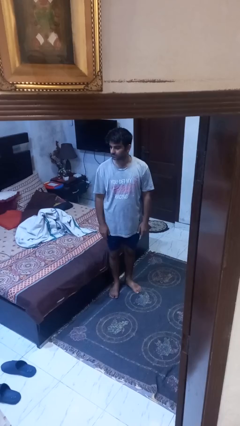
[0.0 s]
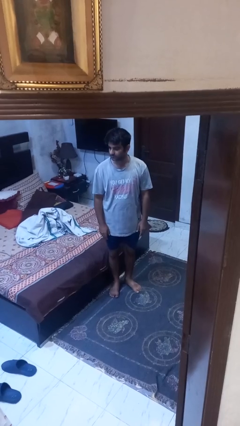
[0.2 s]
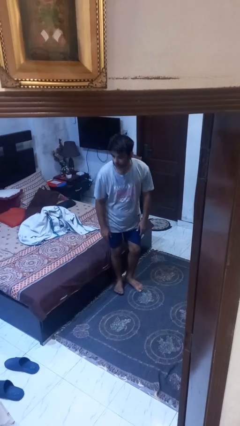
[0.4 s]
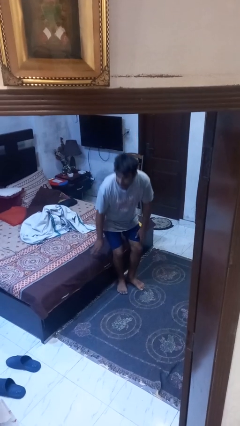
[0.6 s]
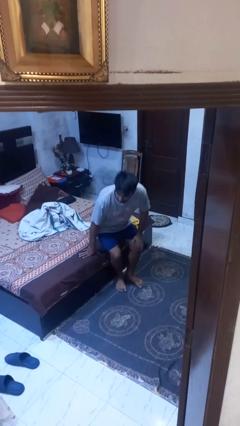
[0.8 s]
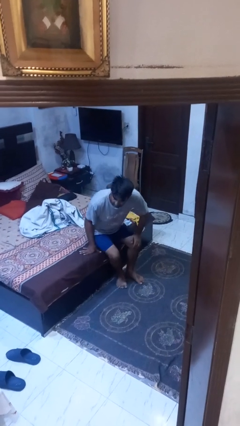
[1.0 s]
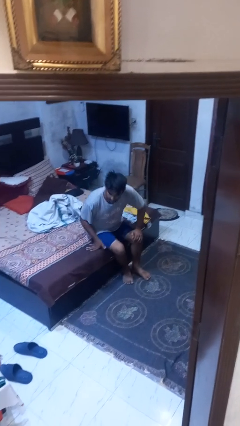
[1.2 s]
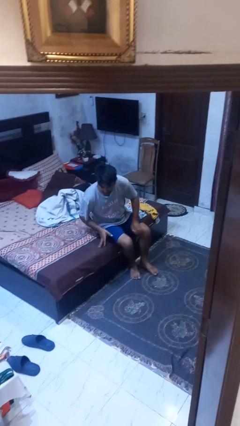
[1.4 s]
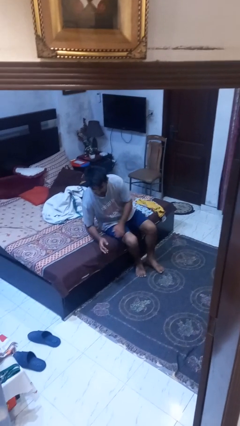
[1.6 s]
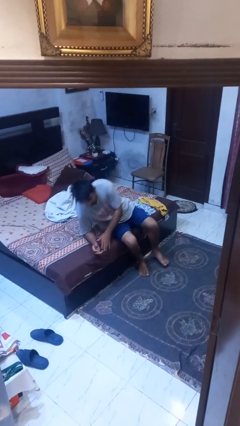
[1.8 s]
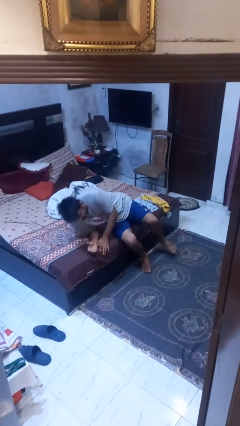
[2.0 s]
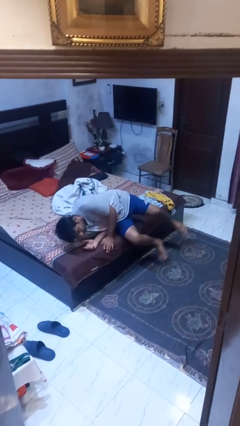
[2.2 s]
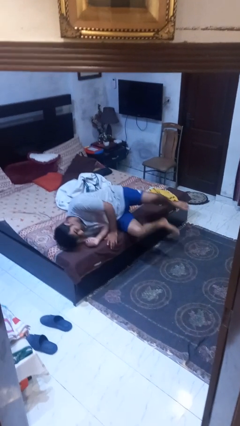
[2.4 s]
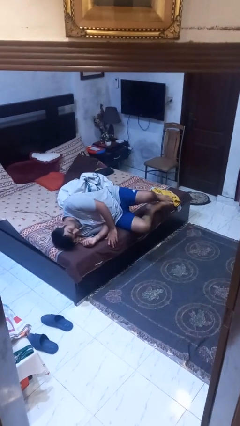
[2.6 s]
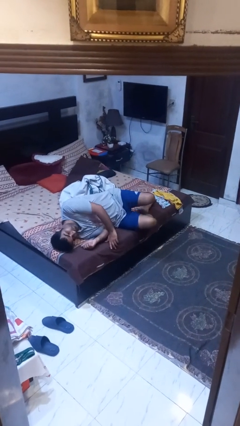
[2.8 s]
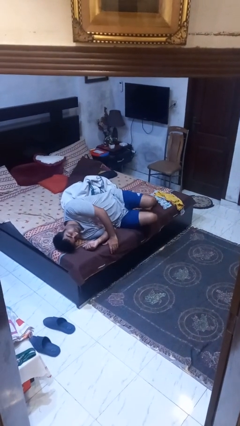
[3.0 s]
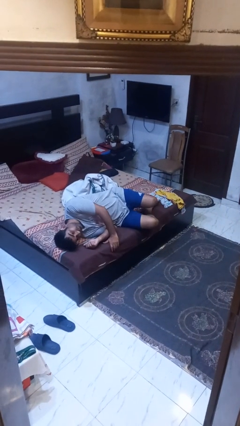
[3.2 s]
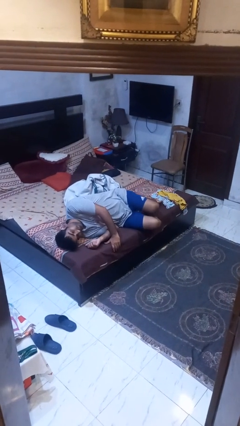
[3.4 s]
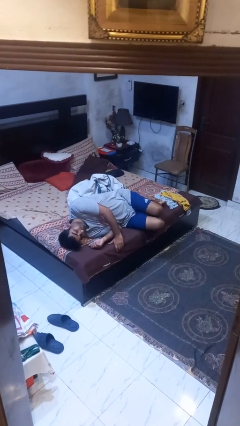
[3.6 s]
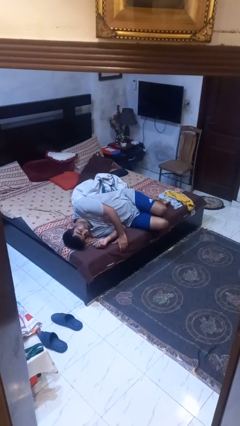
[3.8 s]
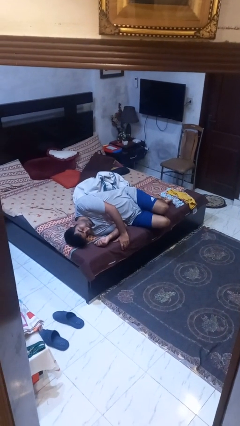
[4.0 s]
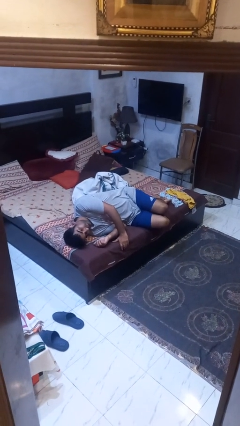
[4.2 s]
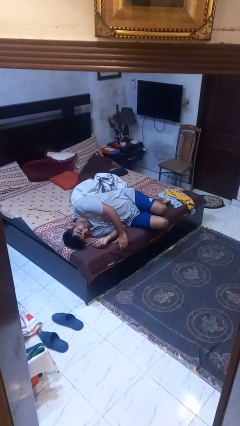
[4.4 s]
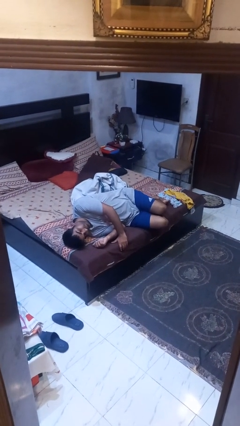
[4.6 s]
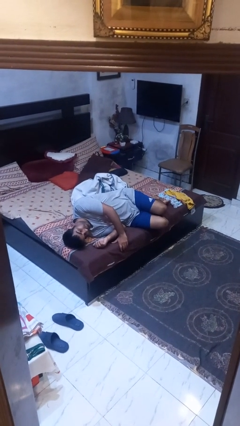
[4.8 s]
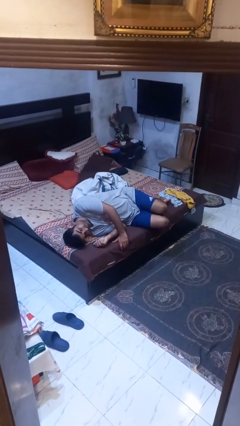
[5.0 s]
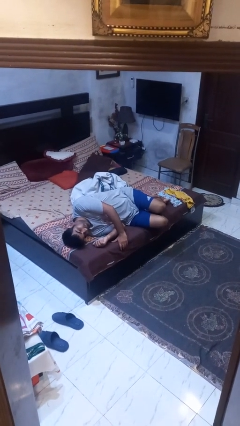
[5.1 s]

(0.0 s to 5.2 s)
person lies down on bed

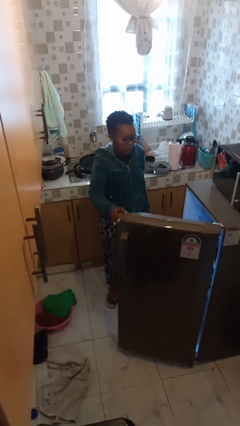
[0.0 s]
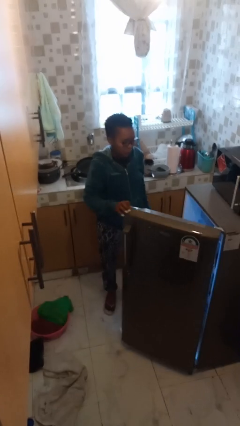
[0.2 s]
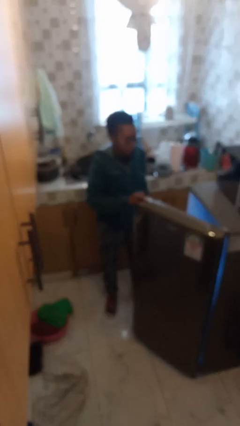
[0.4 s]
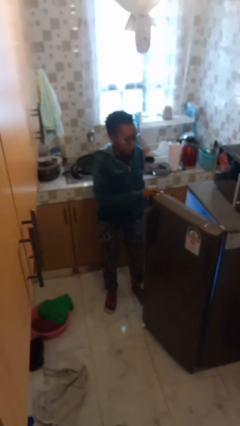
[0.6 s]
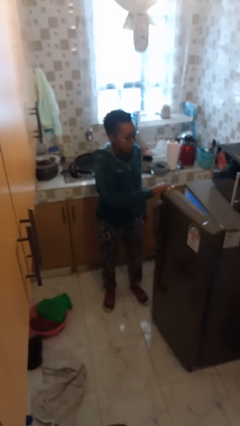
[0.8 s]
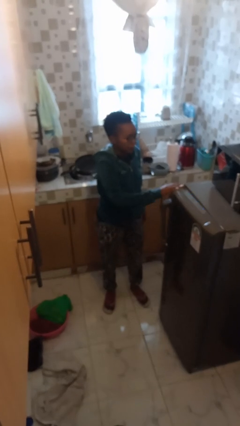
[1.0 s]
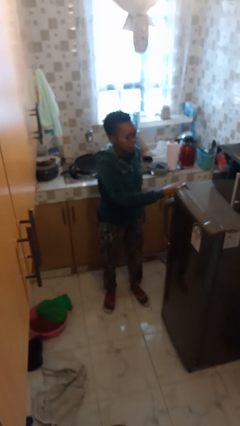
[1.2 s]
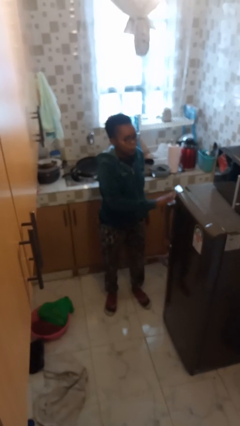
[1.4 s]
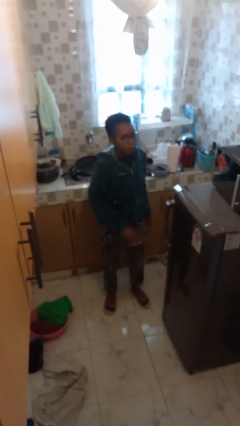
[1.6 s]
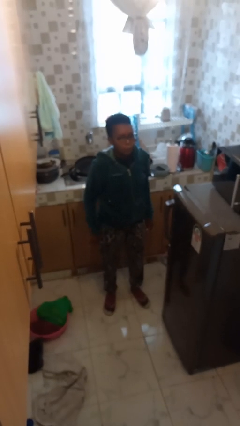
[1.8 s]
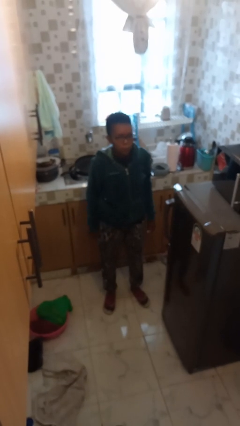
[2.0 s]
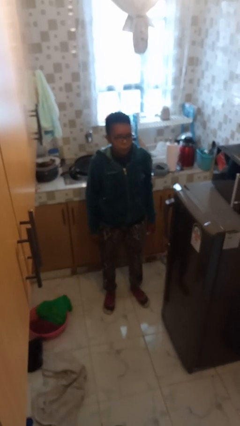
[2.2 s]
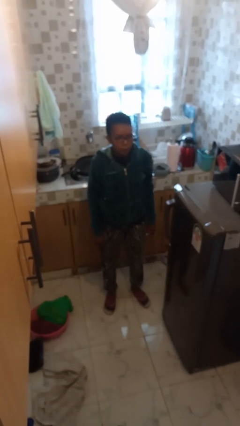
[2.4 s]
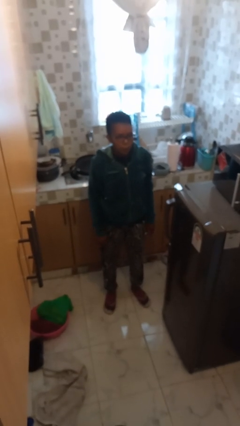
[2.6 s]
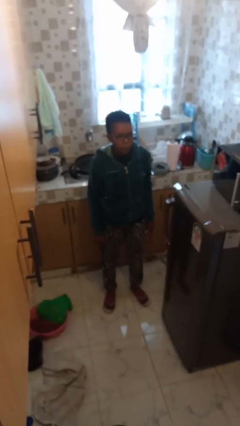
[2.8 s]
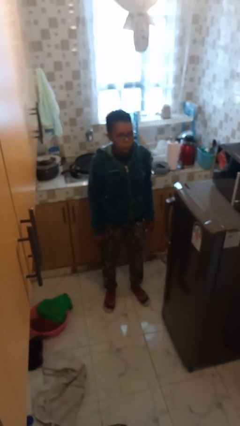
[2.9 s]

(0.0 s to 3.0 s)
person closes refrigerator

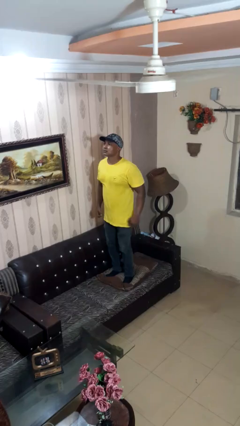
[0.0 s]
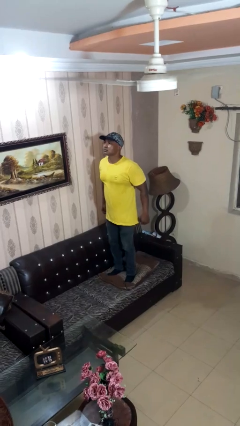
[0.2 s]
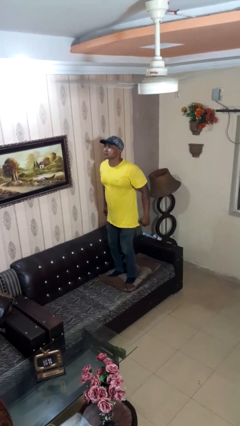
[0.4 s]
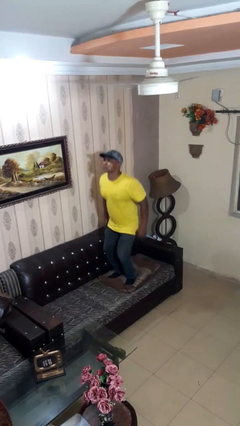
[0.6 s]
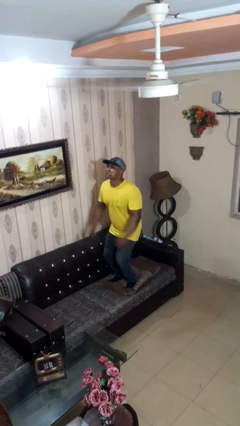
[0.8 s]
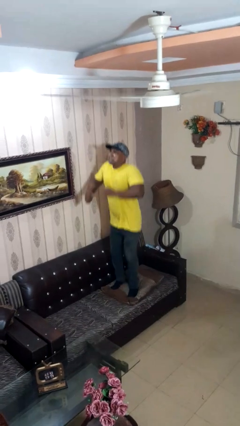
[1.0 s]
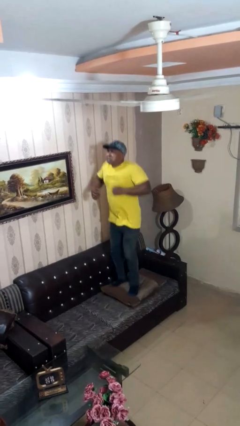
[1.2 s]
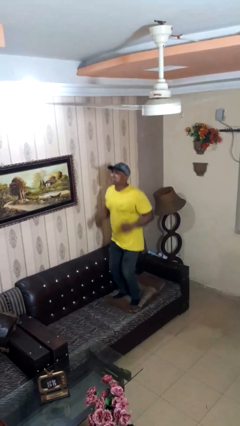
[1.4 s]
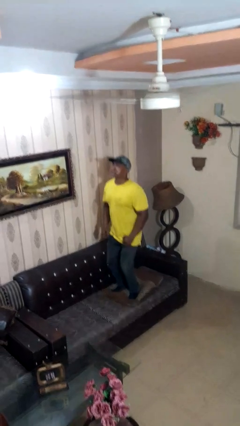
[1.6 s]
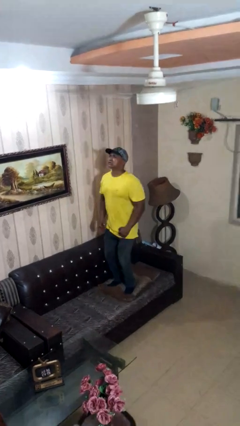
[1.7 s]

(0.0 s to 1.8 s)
person jumps on couch

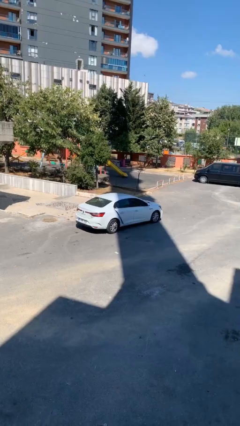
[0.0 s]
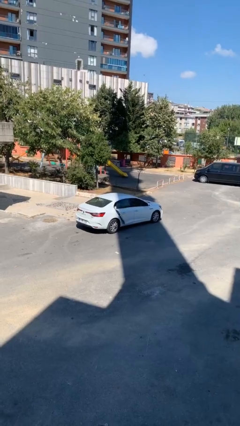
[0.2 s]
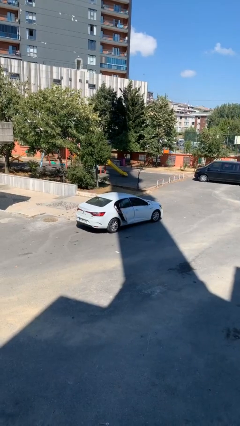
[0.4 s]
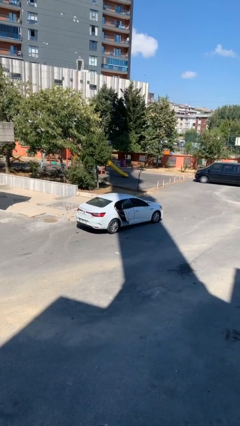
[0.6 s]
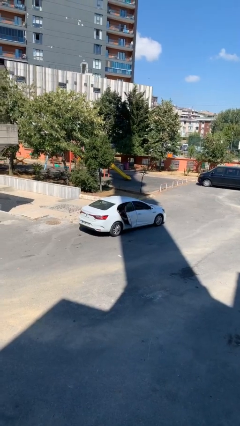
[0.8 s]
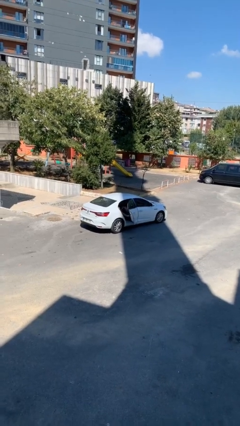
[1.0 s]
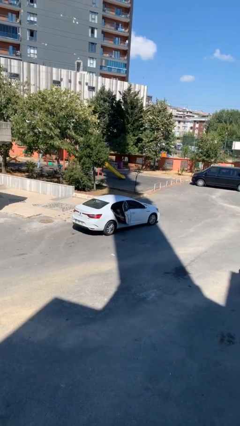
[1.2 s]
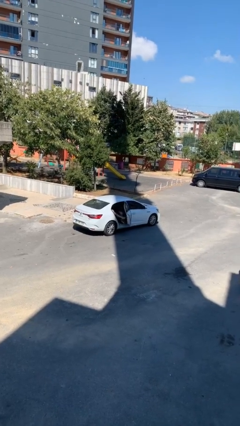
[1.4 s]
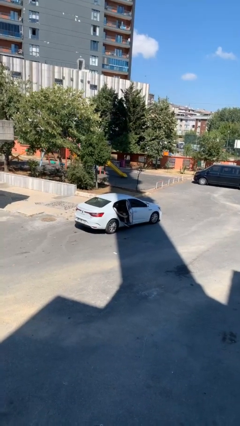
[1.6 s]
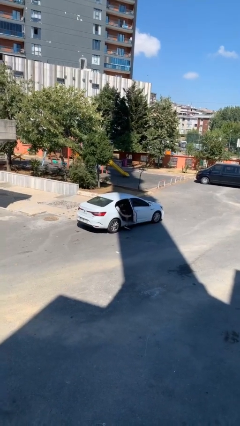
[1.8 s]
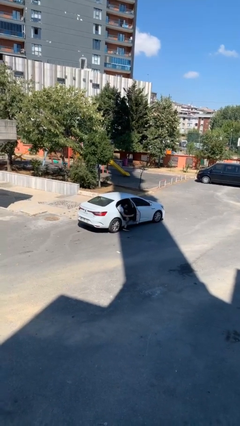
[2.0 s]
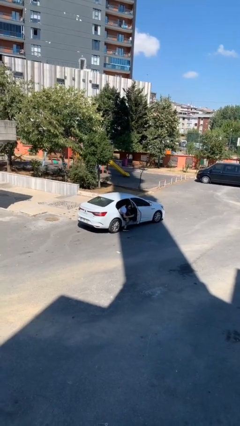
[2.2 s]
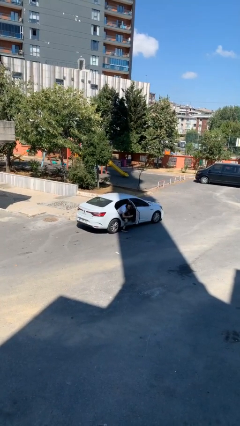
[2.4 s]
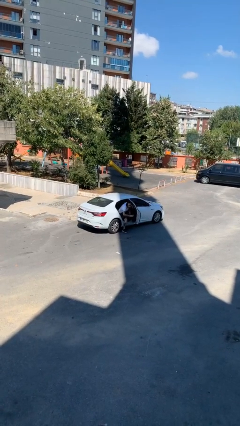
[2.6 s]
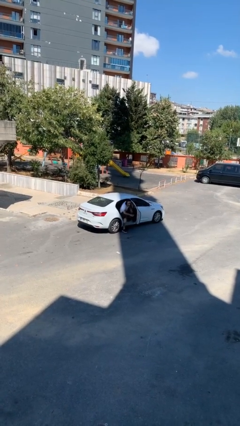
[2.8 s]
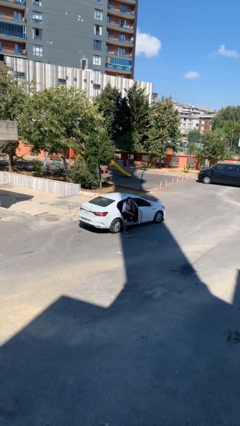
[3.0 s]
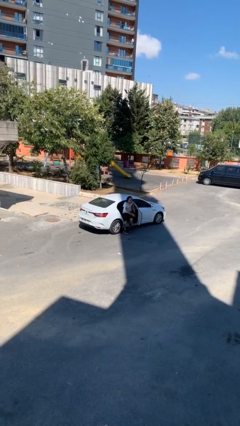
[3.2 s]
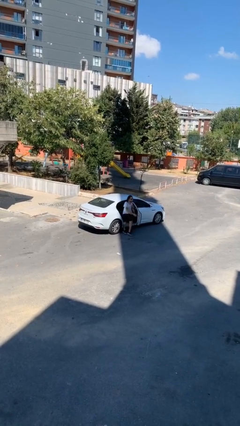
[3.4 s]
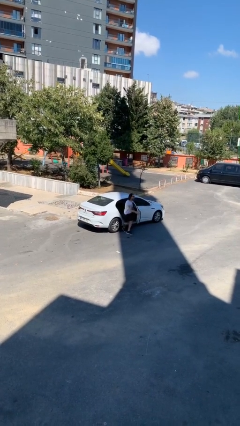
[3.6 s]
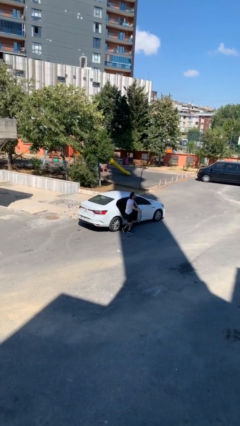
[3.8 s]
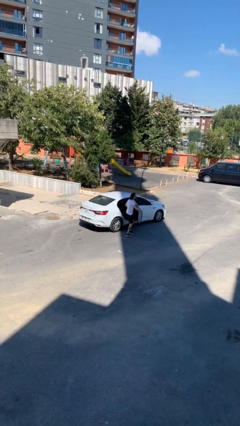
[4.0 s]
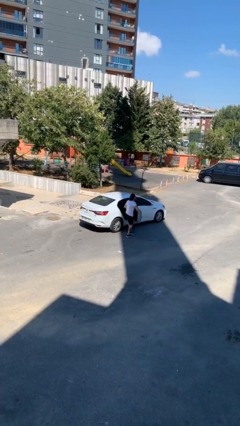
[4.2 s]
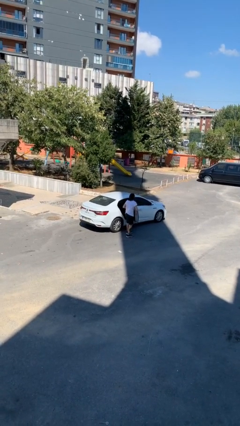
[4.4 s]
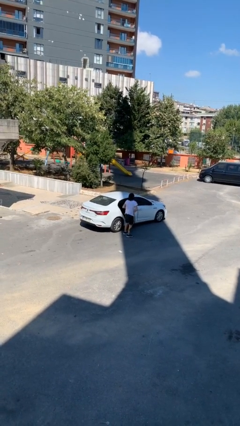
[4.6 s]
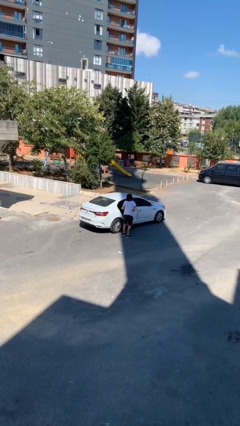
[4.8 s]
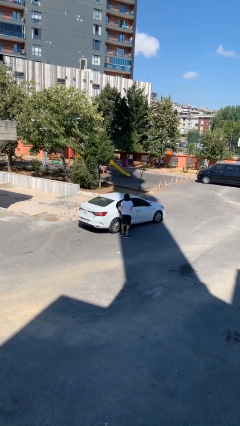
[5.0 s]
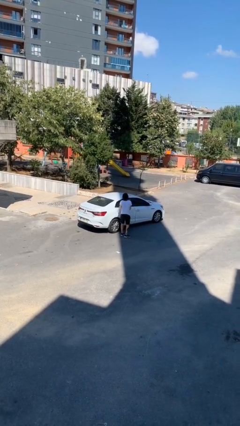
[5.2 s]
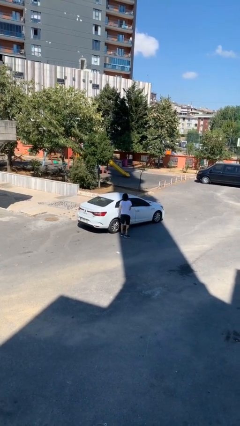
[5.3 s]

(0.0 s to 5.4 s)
car drops off person

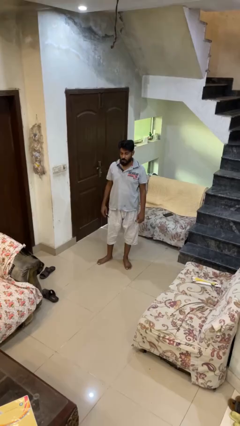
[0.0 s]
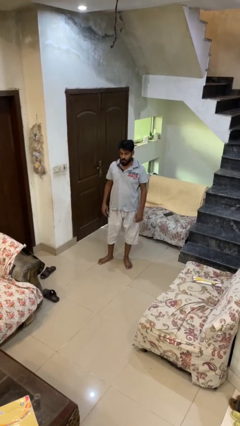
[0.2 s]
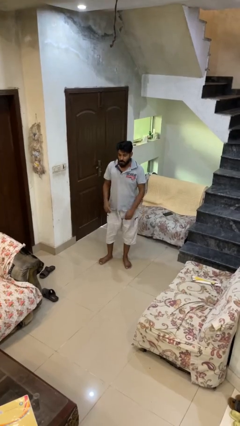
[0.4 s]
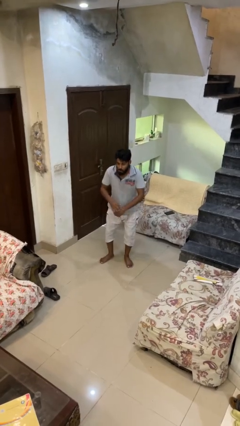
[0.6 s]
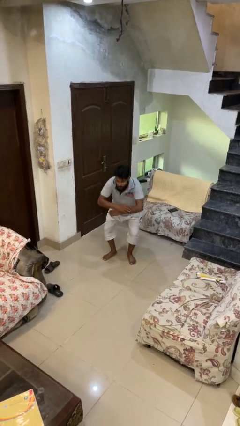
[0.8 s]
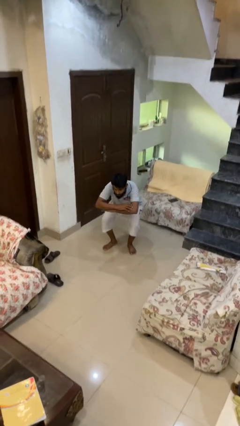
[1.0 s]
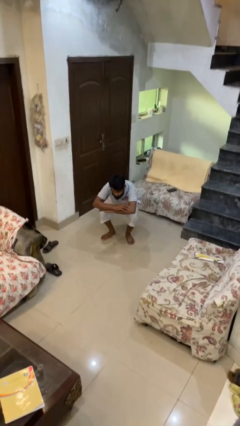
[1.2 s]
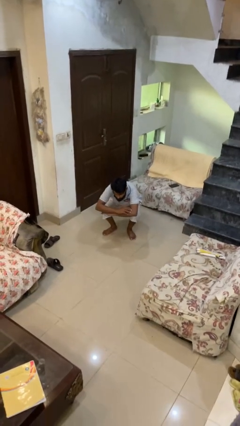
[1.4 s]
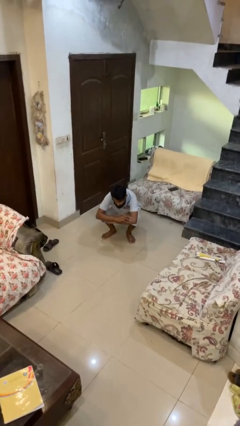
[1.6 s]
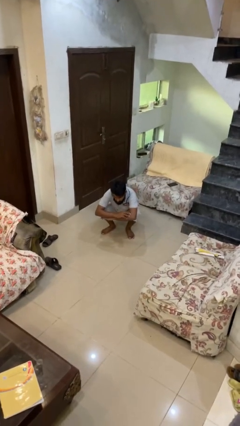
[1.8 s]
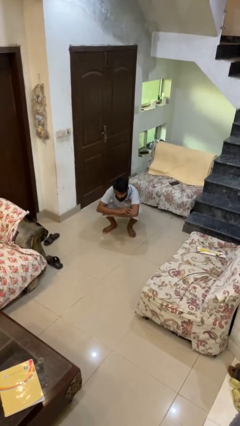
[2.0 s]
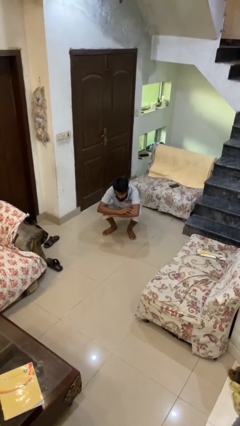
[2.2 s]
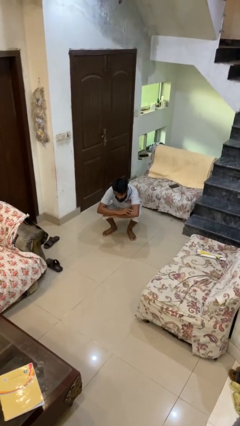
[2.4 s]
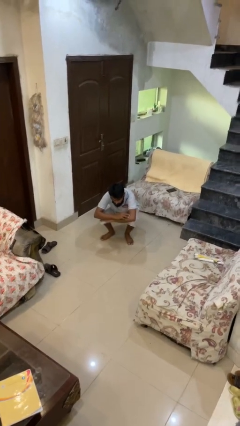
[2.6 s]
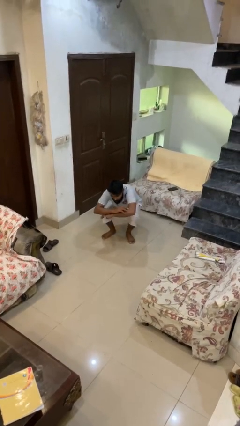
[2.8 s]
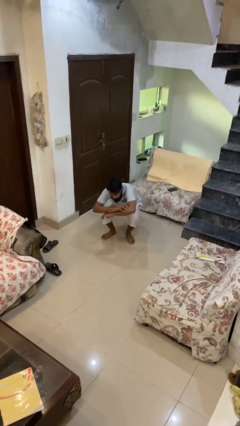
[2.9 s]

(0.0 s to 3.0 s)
person squats
